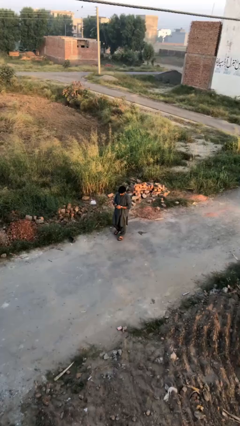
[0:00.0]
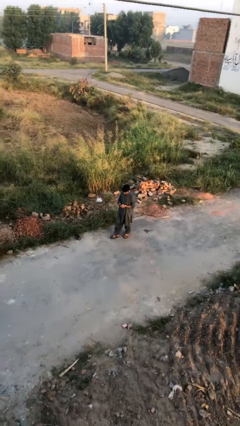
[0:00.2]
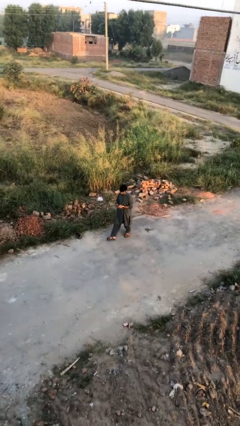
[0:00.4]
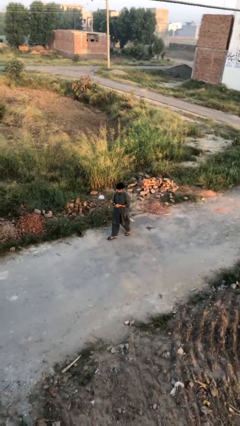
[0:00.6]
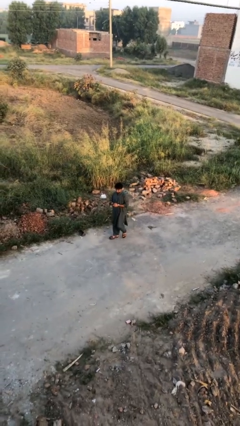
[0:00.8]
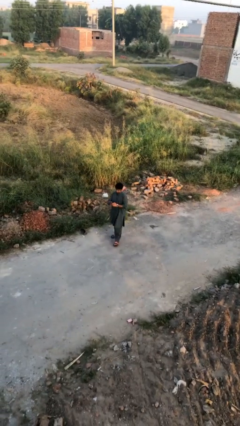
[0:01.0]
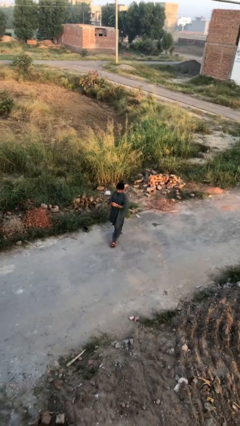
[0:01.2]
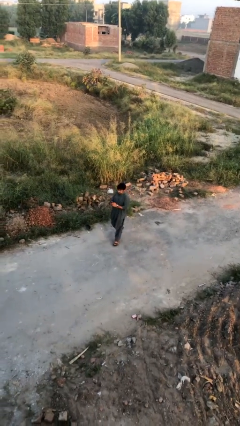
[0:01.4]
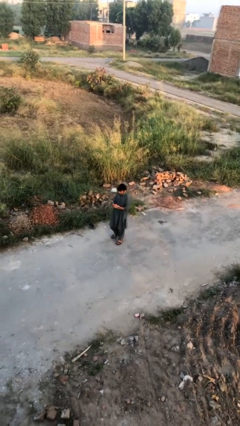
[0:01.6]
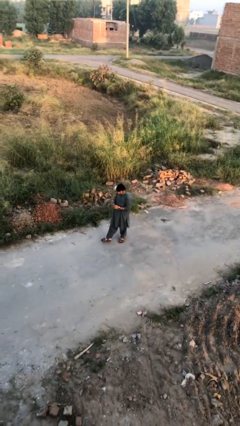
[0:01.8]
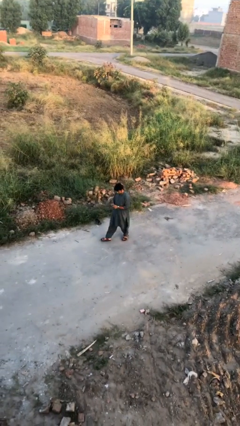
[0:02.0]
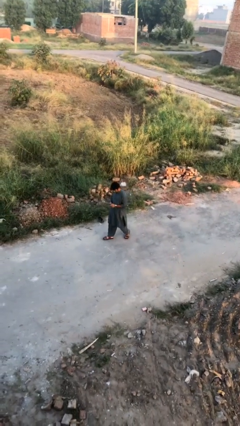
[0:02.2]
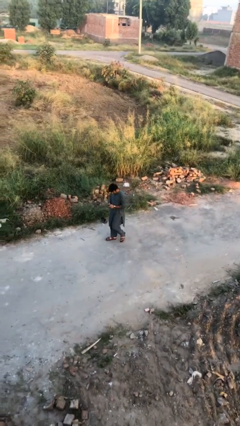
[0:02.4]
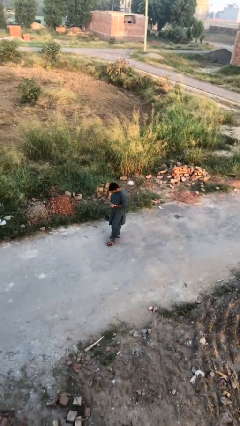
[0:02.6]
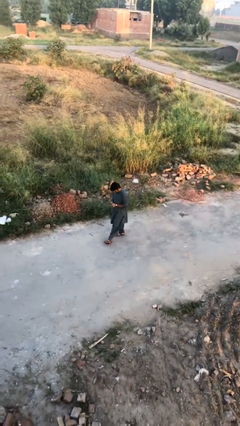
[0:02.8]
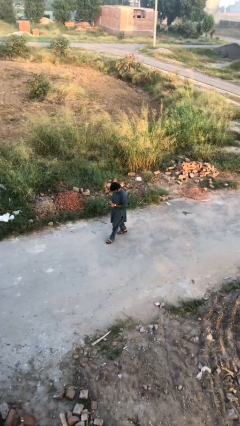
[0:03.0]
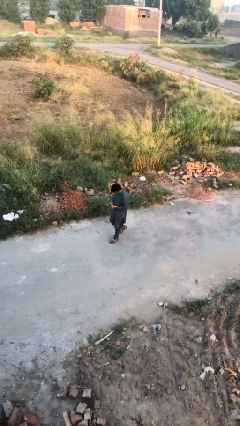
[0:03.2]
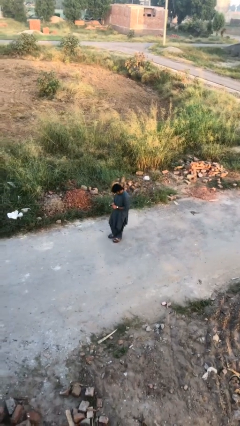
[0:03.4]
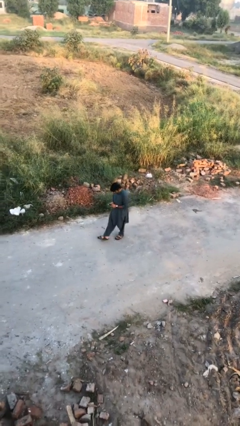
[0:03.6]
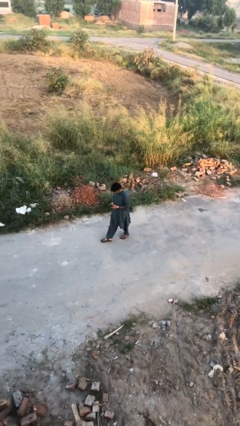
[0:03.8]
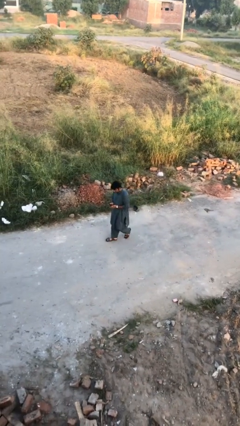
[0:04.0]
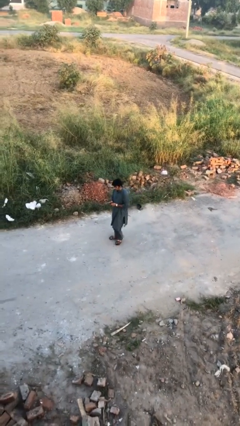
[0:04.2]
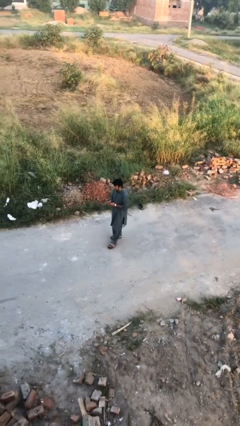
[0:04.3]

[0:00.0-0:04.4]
person texts on phone

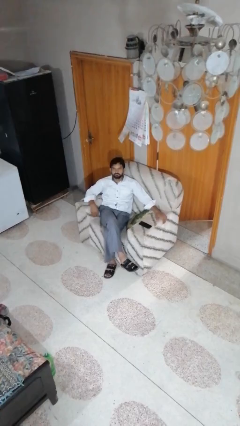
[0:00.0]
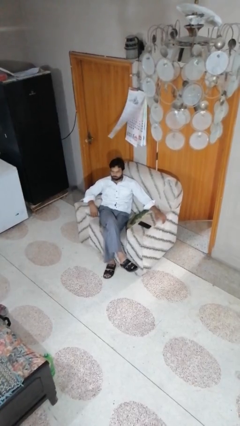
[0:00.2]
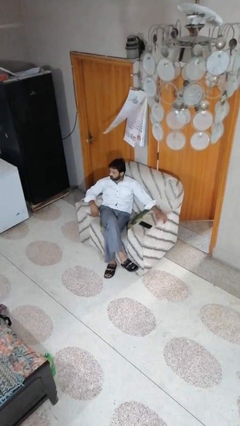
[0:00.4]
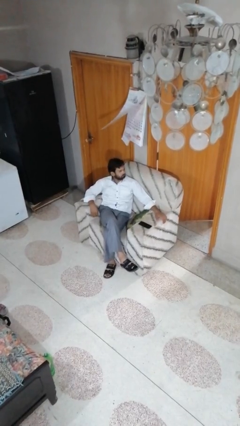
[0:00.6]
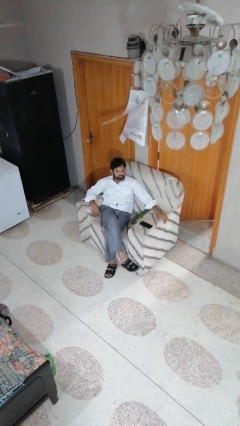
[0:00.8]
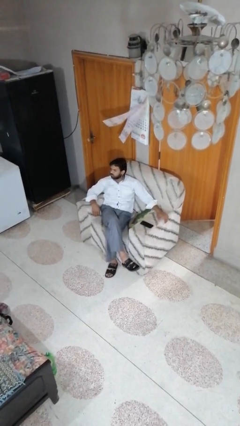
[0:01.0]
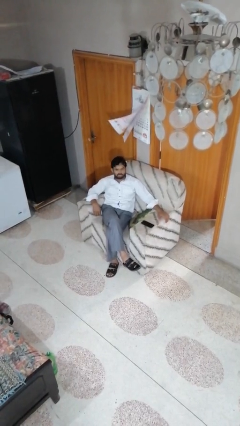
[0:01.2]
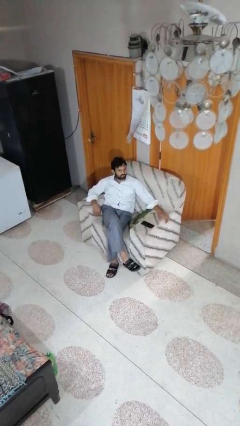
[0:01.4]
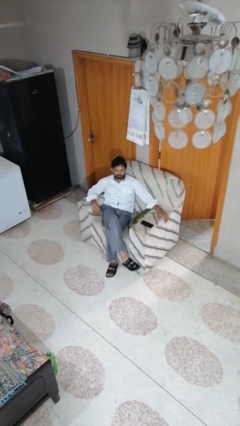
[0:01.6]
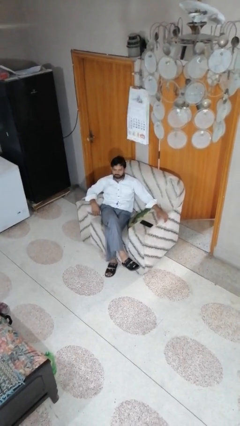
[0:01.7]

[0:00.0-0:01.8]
person shakes head

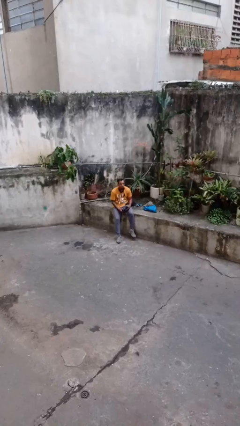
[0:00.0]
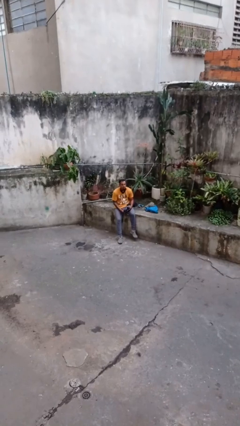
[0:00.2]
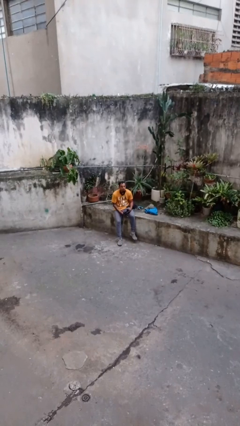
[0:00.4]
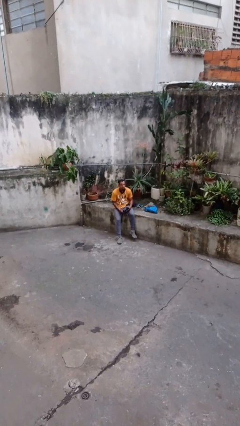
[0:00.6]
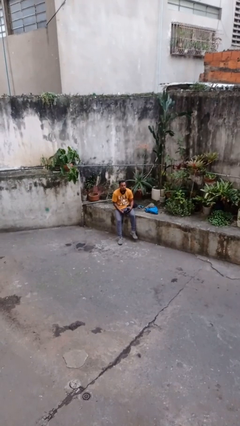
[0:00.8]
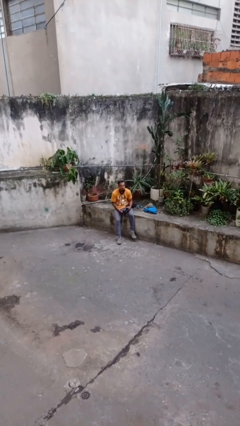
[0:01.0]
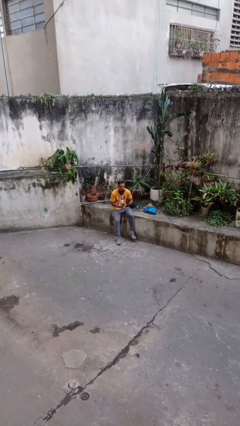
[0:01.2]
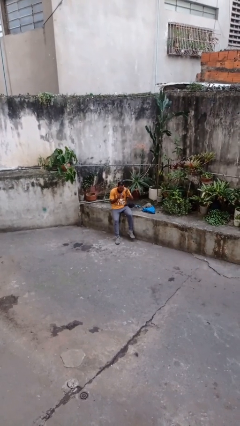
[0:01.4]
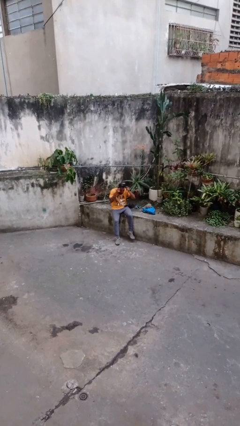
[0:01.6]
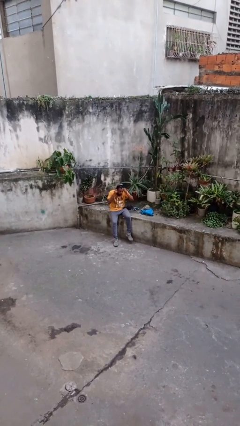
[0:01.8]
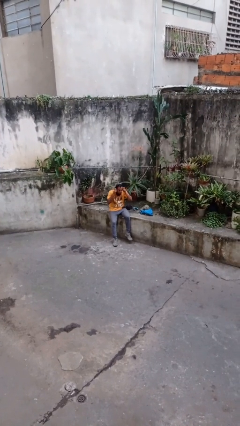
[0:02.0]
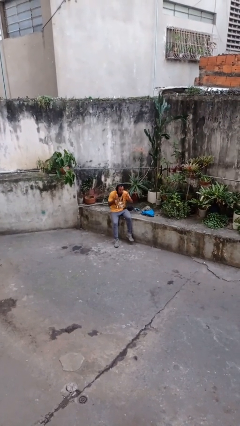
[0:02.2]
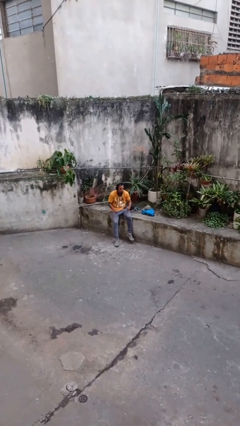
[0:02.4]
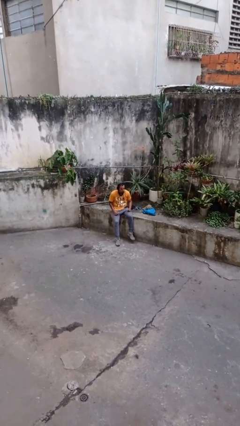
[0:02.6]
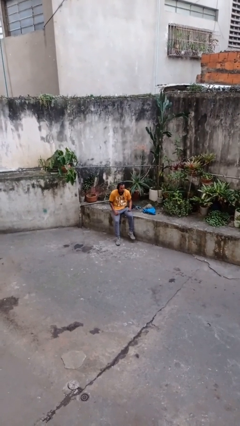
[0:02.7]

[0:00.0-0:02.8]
person puts on headphones

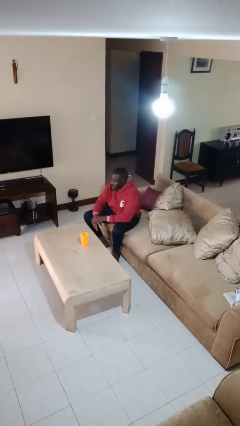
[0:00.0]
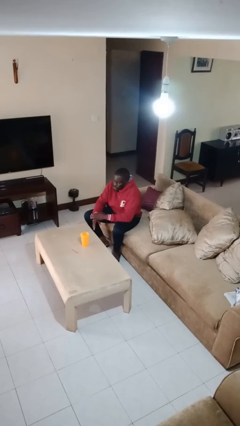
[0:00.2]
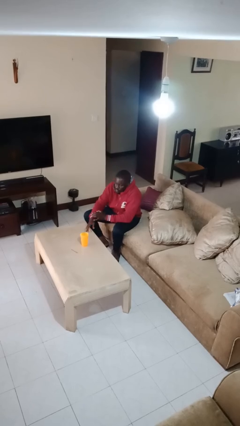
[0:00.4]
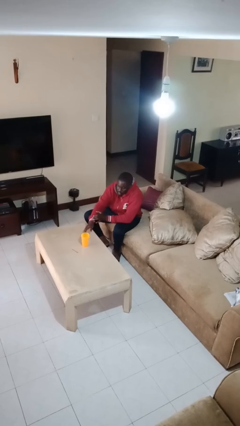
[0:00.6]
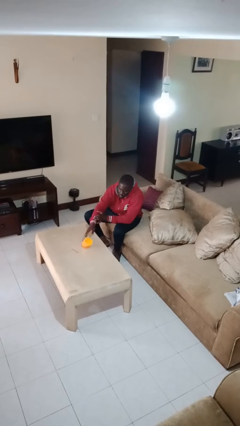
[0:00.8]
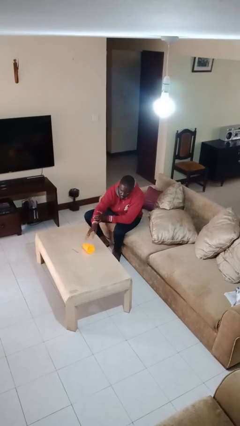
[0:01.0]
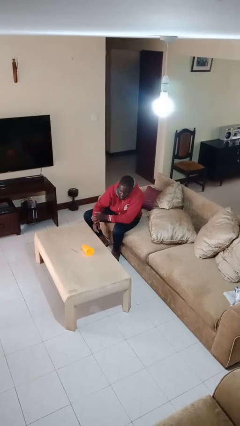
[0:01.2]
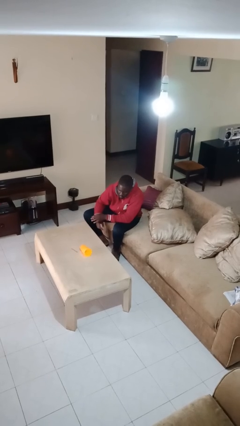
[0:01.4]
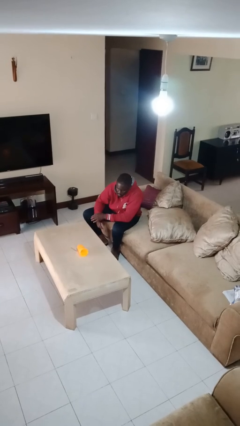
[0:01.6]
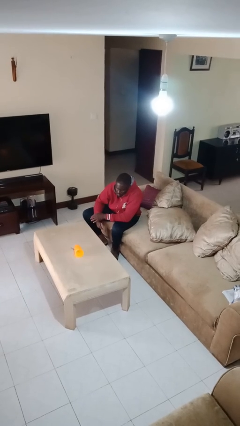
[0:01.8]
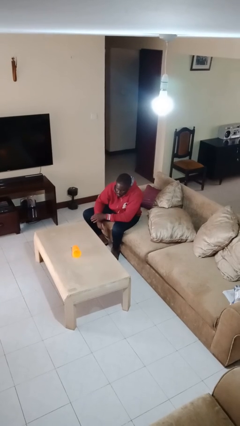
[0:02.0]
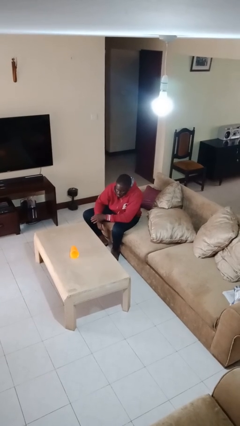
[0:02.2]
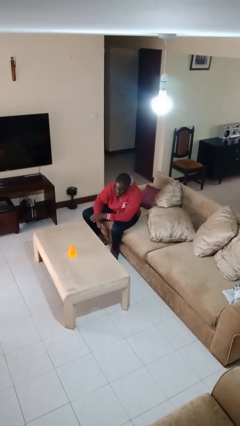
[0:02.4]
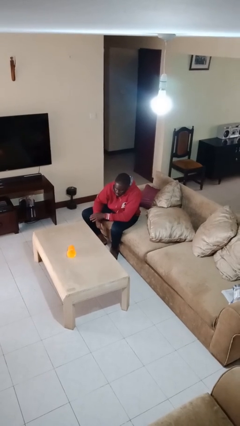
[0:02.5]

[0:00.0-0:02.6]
person knocks over glass

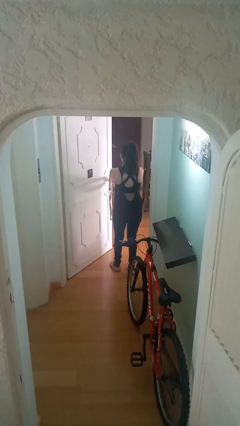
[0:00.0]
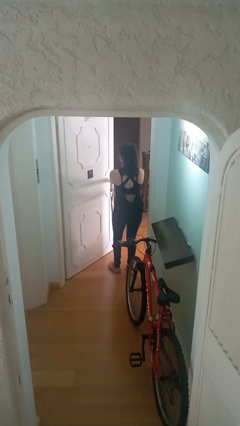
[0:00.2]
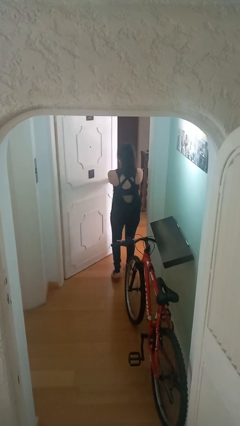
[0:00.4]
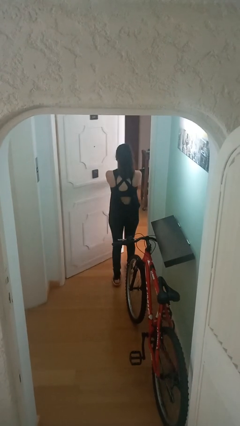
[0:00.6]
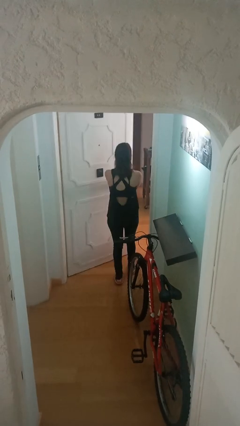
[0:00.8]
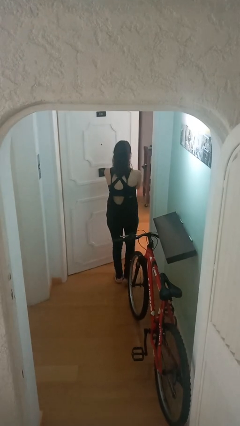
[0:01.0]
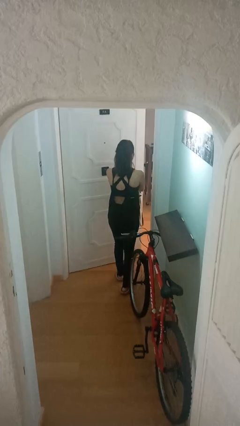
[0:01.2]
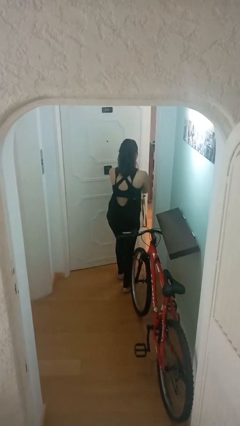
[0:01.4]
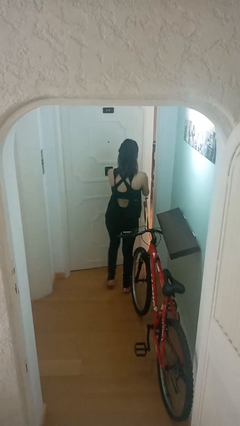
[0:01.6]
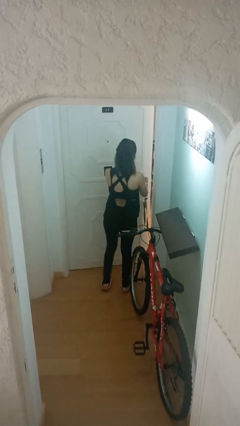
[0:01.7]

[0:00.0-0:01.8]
person closes facility door

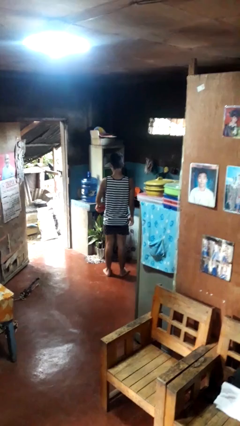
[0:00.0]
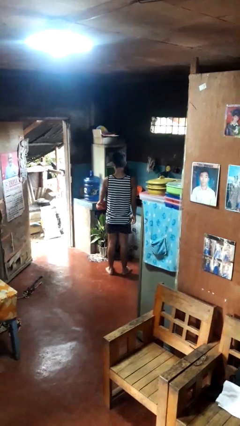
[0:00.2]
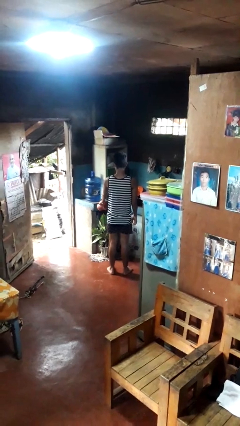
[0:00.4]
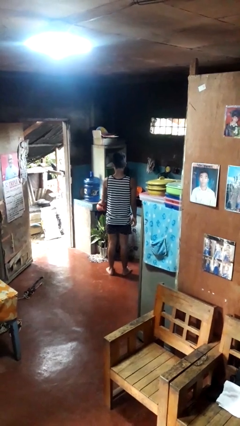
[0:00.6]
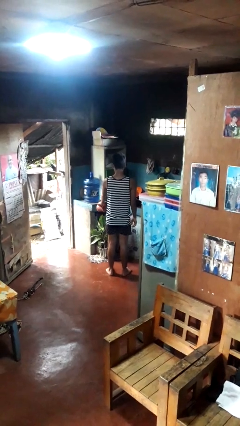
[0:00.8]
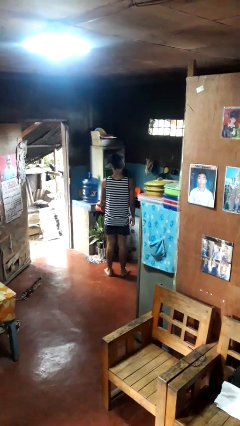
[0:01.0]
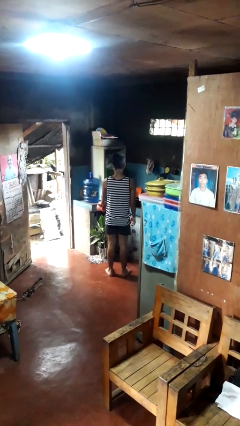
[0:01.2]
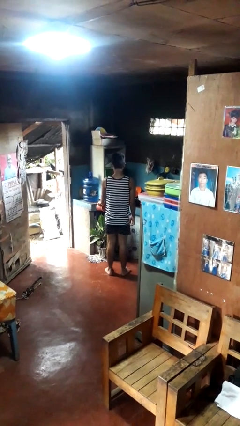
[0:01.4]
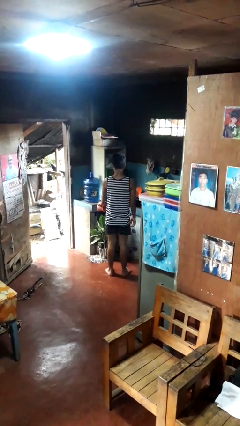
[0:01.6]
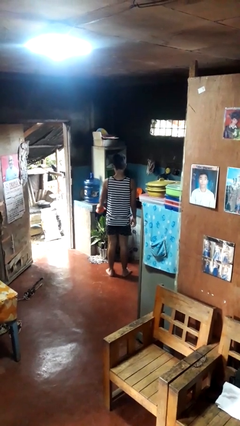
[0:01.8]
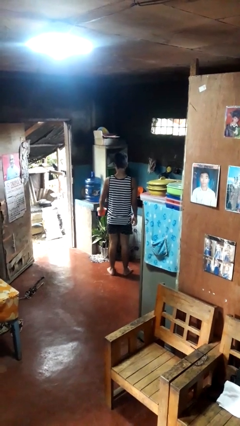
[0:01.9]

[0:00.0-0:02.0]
person waters houseplant

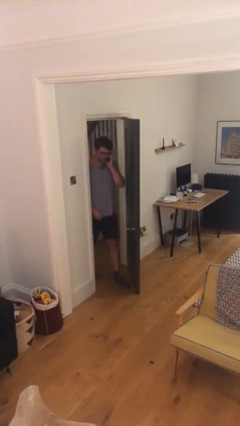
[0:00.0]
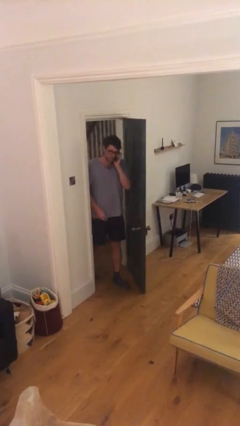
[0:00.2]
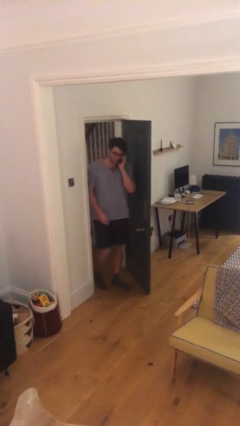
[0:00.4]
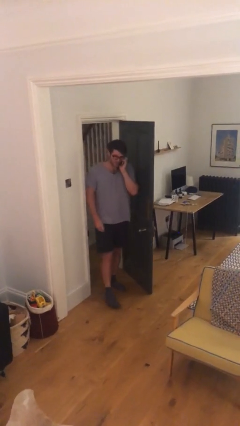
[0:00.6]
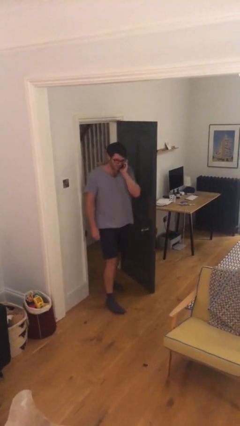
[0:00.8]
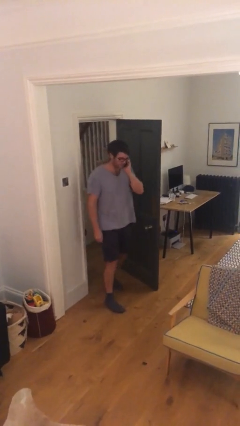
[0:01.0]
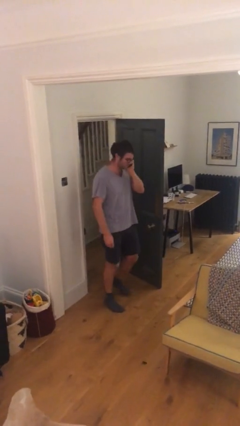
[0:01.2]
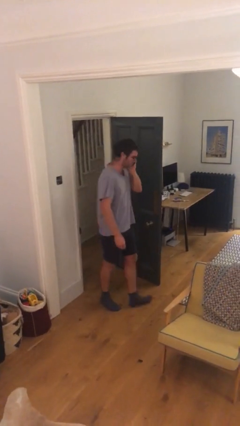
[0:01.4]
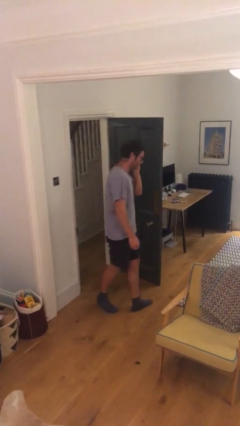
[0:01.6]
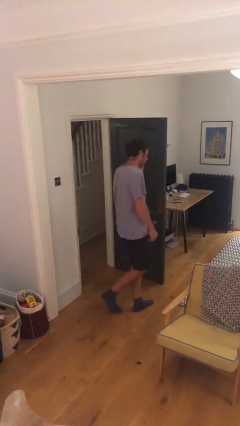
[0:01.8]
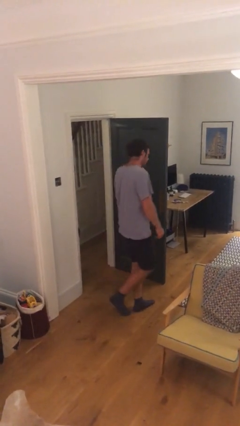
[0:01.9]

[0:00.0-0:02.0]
person enters scene through structure
